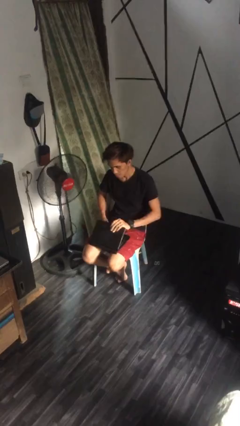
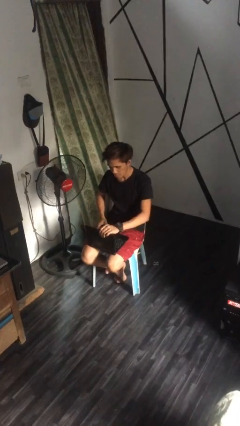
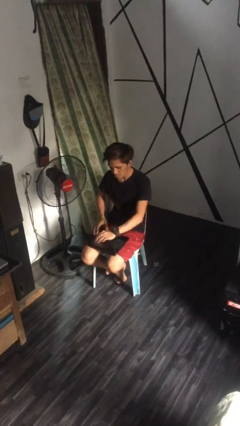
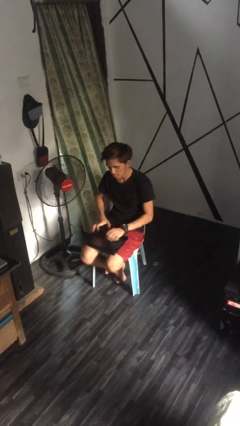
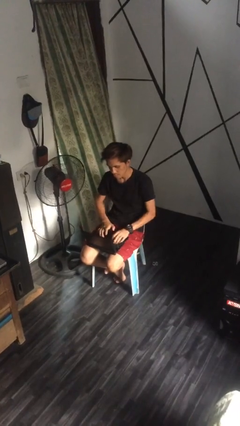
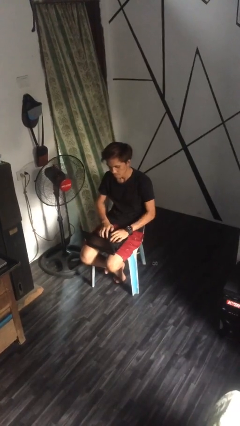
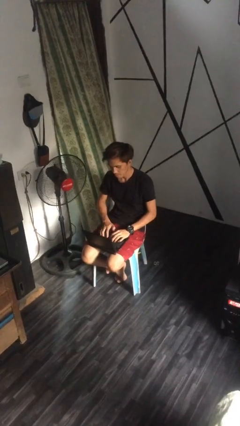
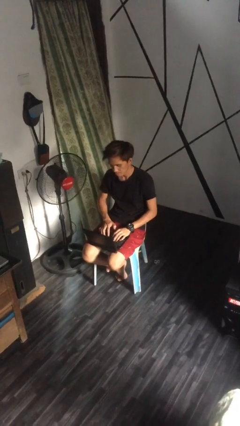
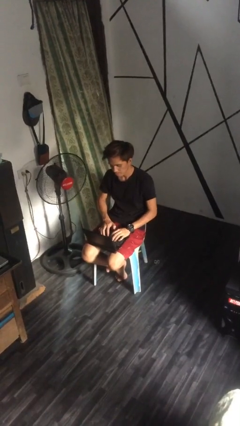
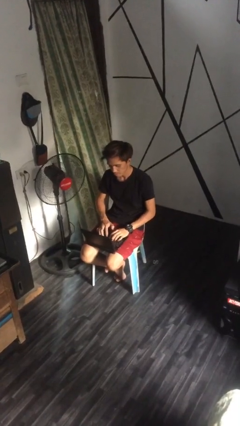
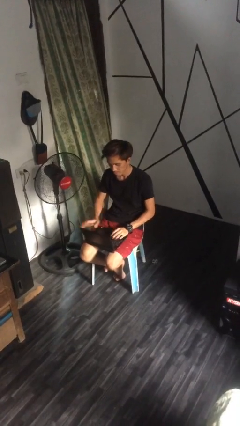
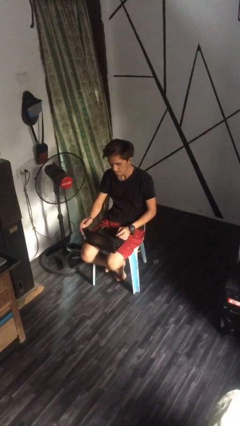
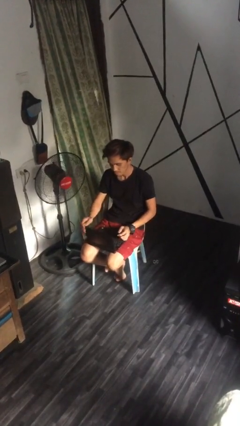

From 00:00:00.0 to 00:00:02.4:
person interacts with laptop

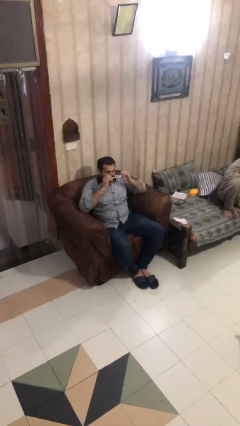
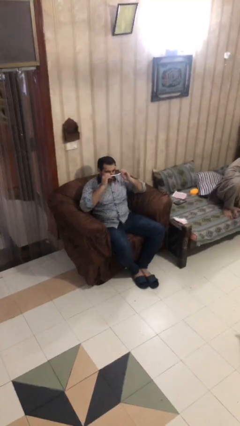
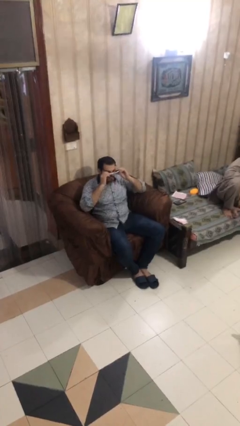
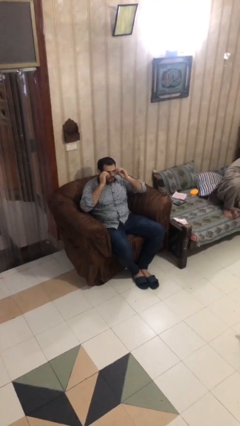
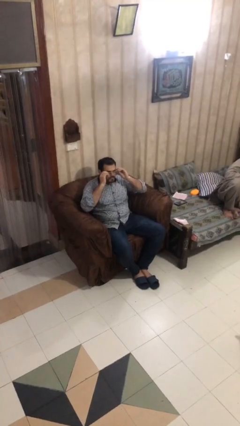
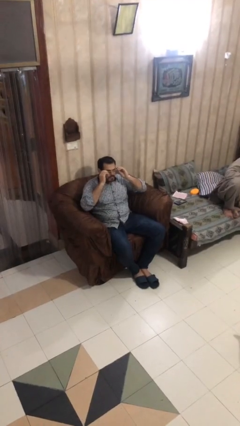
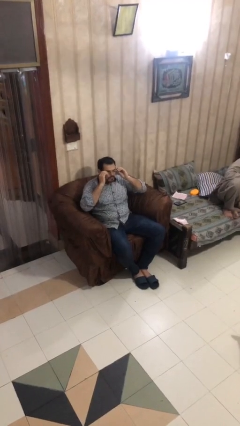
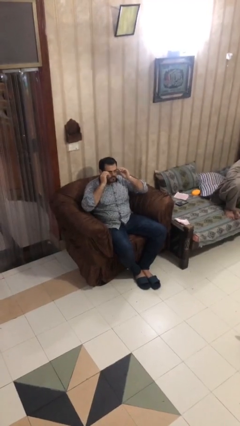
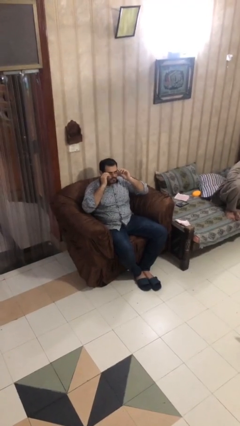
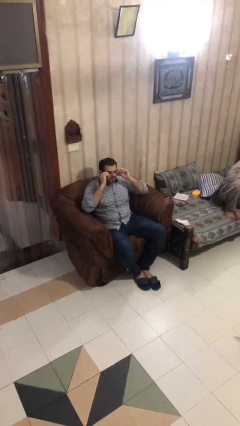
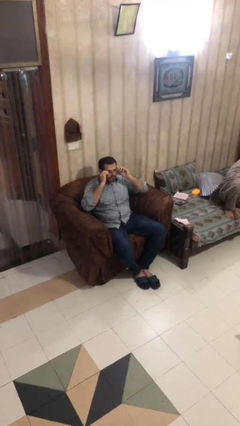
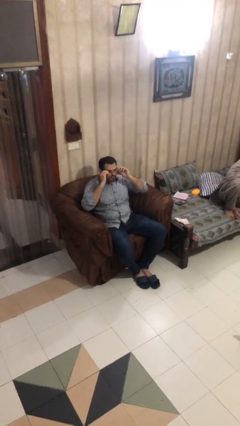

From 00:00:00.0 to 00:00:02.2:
person puts on glasses

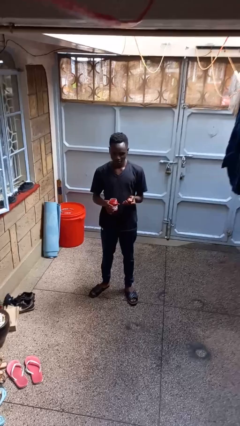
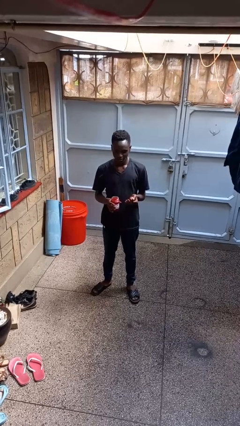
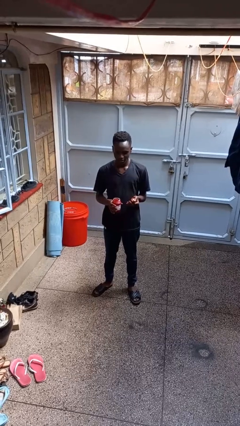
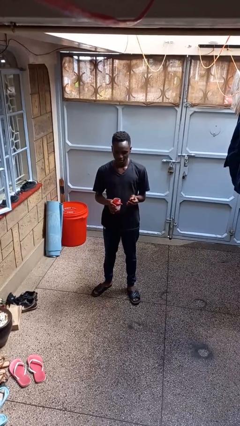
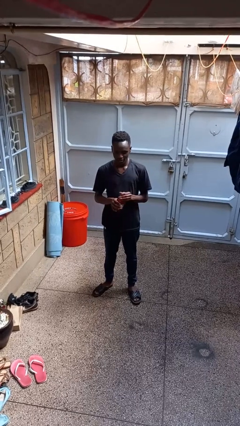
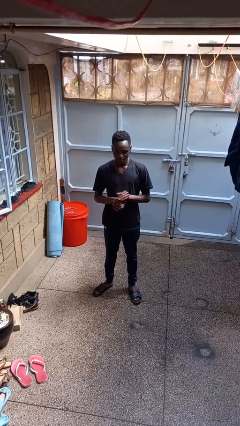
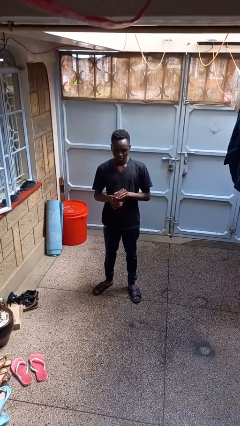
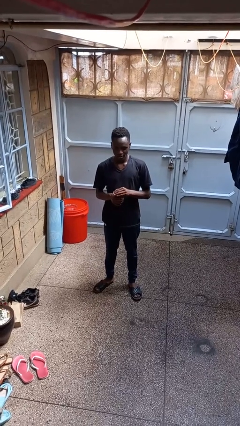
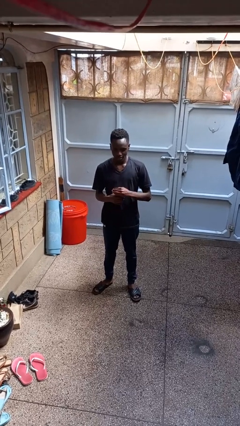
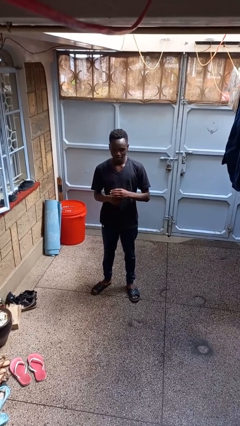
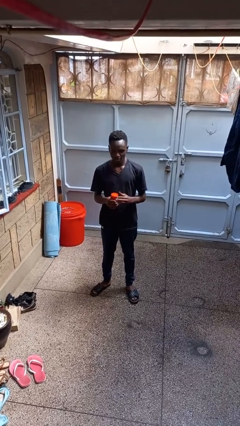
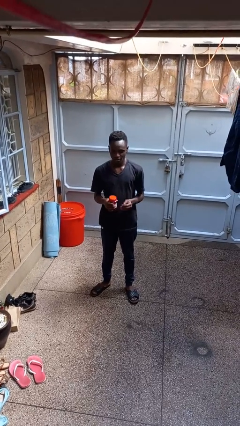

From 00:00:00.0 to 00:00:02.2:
person closes jar

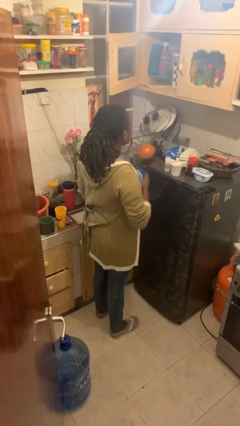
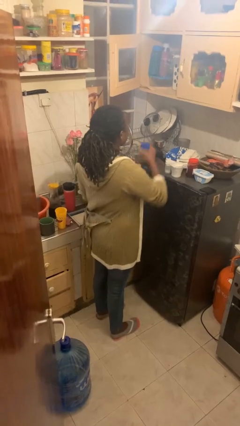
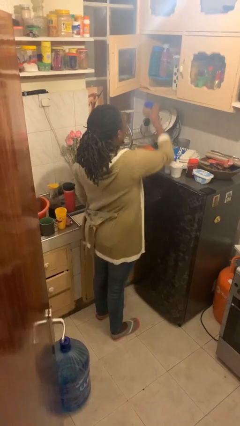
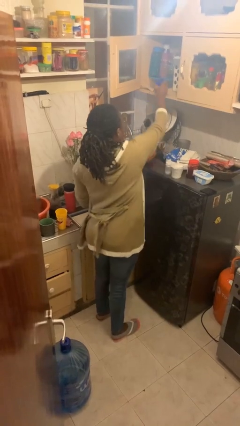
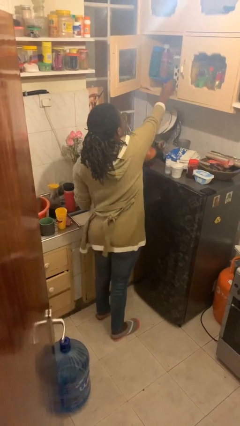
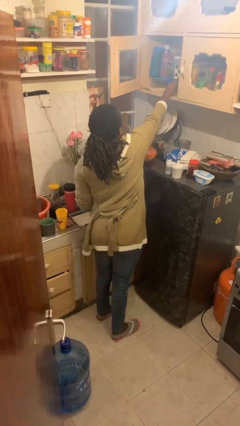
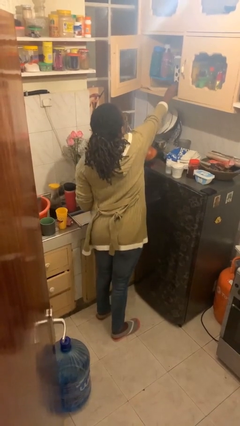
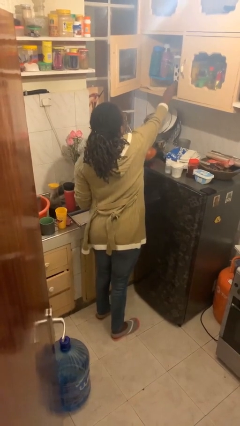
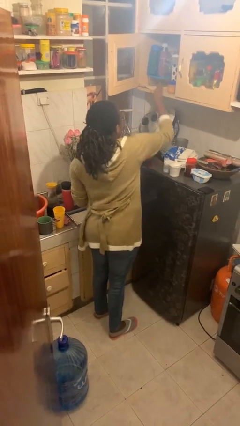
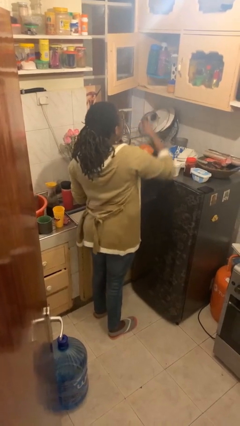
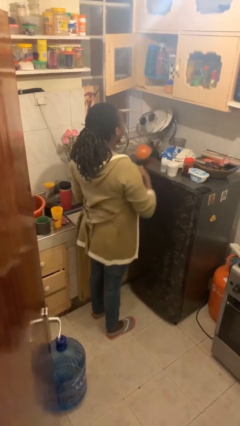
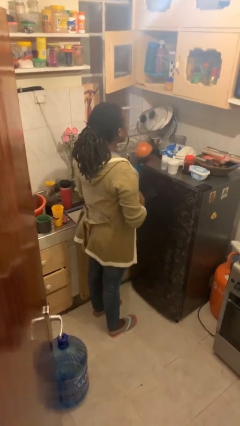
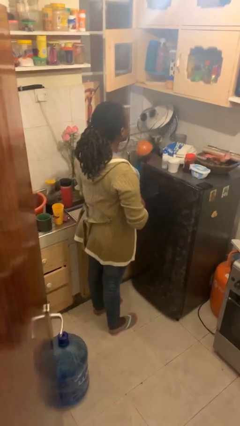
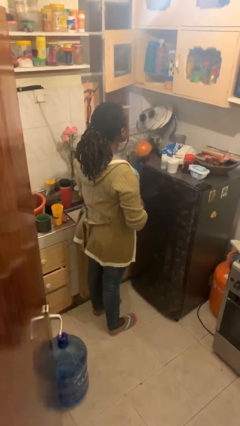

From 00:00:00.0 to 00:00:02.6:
person puts down object on countertop

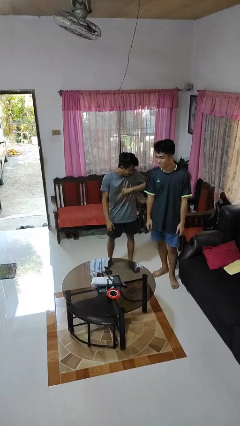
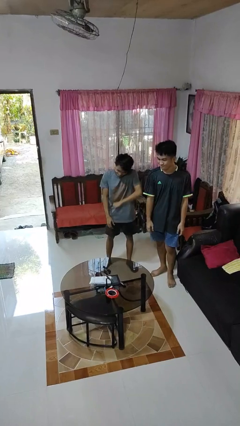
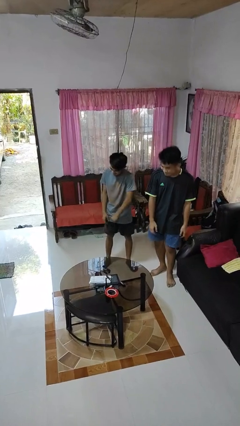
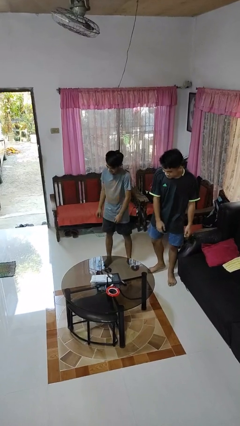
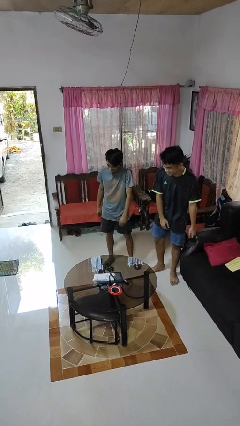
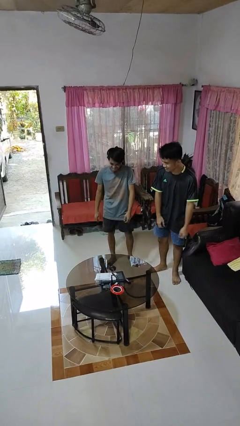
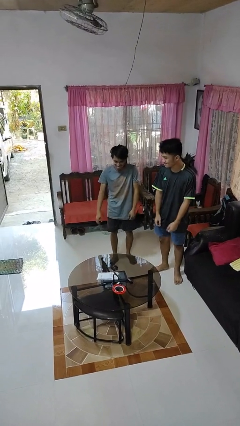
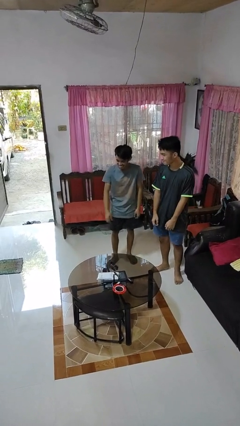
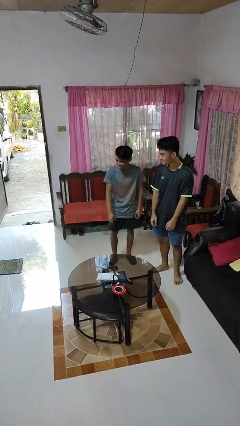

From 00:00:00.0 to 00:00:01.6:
person nudges person with elbow

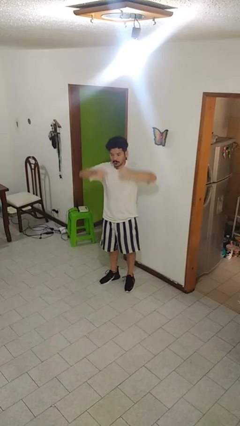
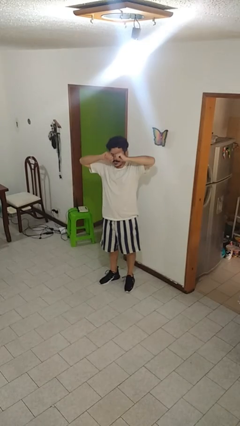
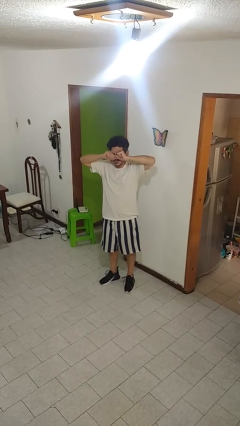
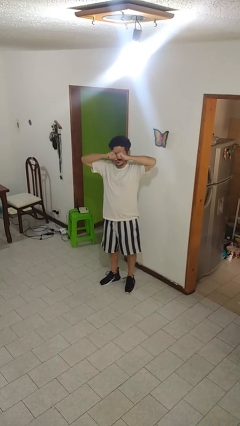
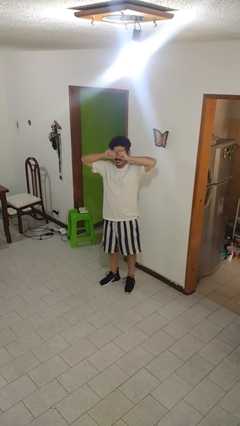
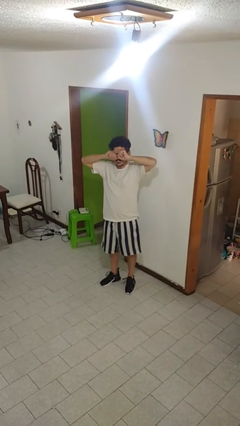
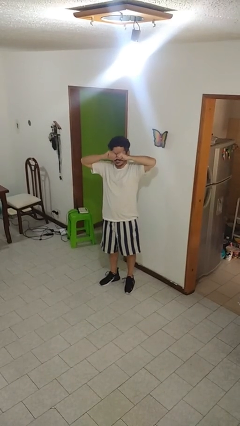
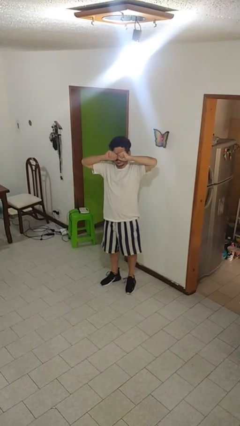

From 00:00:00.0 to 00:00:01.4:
person rubs eyes

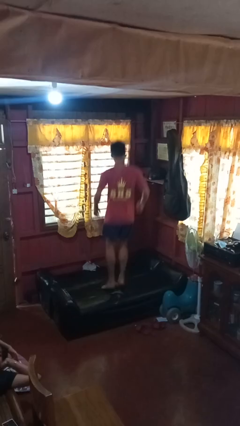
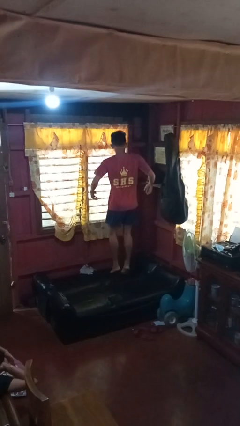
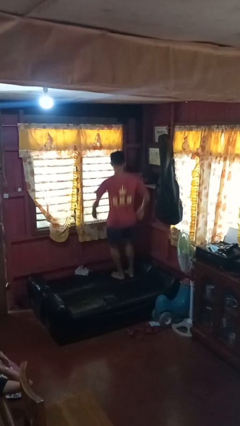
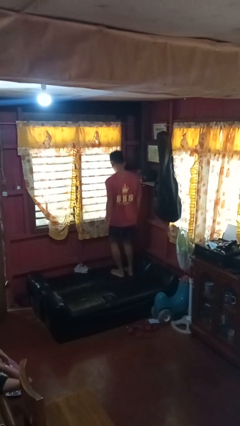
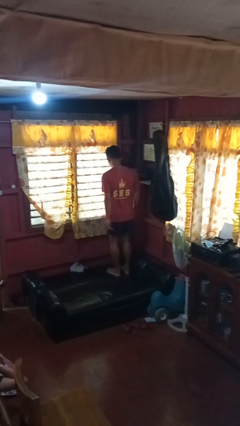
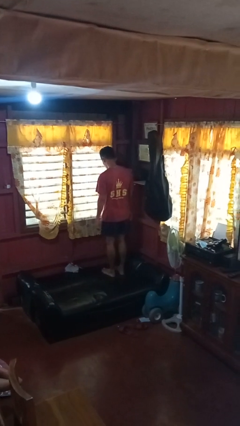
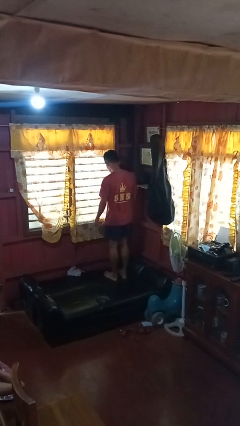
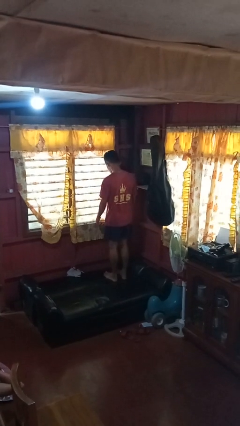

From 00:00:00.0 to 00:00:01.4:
person jumps on couch

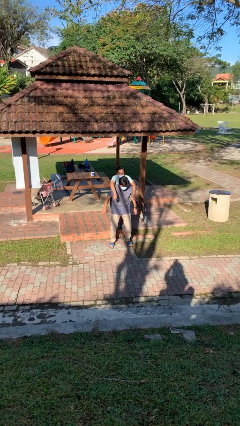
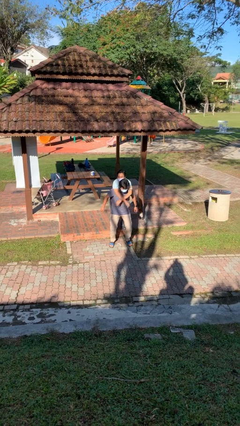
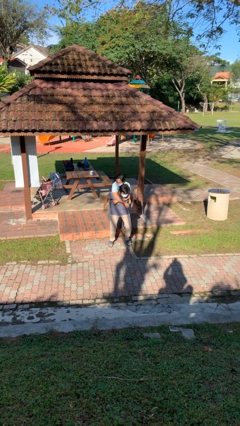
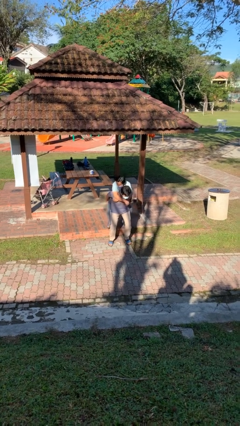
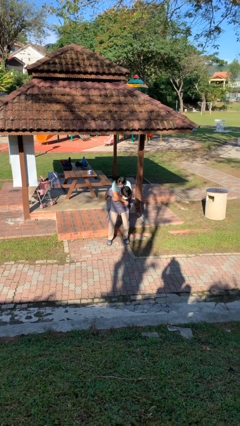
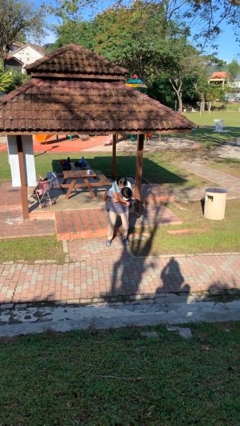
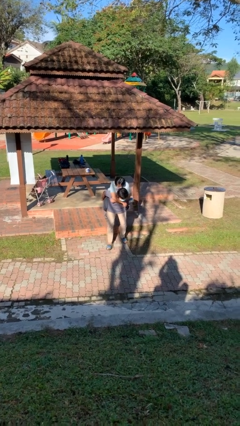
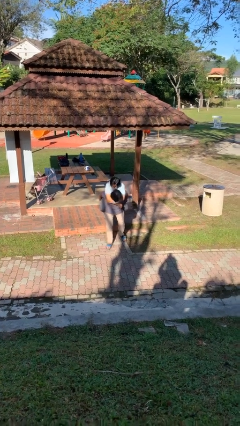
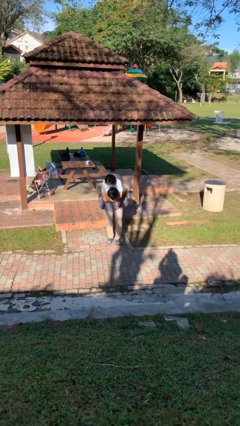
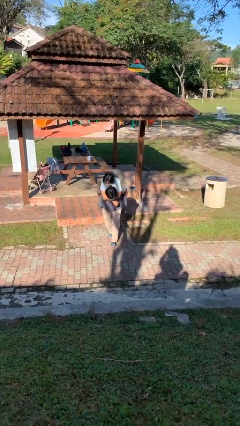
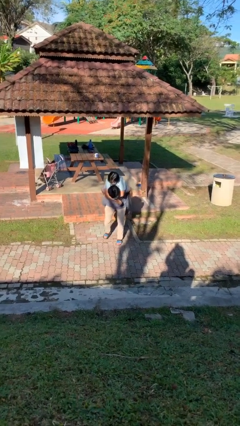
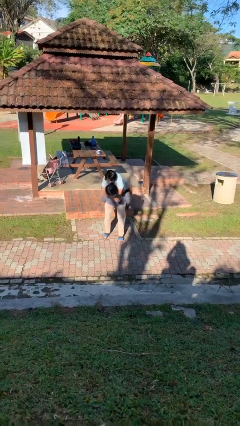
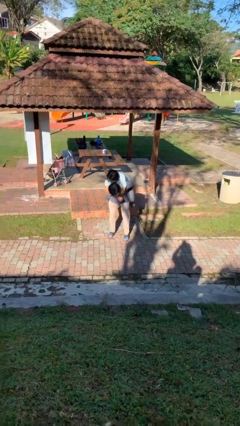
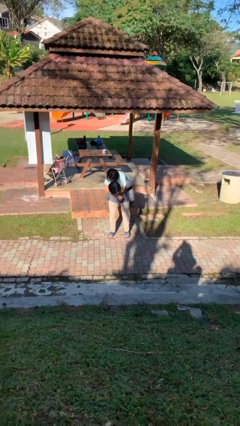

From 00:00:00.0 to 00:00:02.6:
person carries person over shoulder
